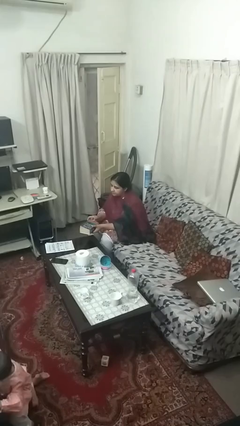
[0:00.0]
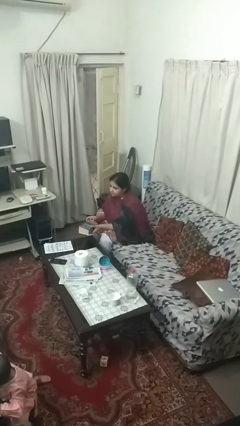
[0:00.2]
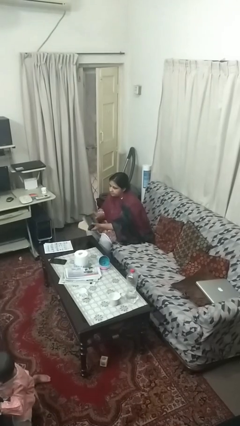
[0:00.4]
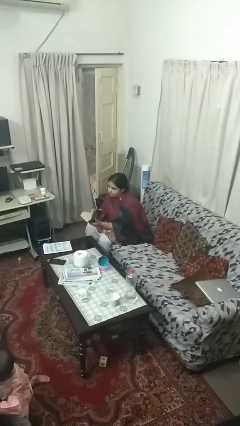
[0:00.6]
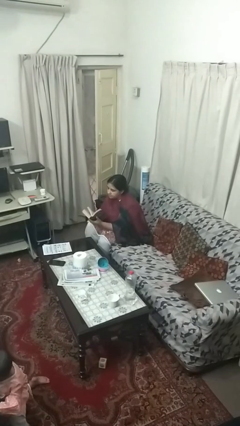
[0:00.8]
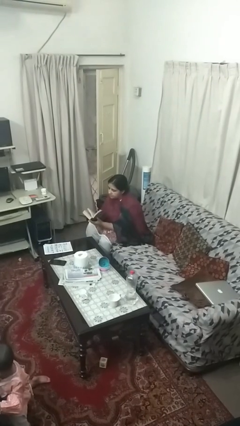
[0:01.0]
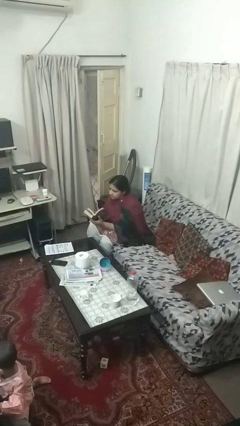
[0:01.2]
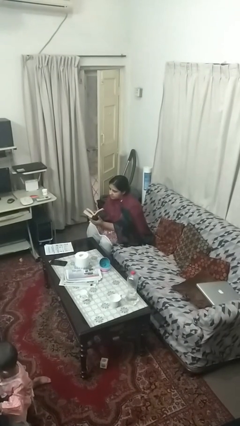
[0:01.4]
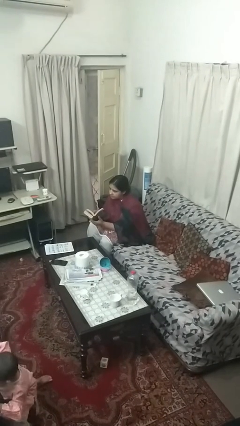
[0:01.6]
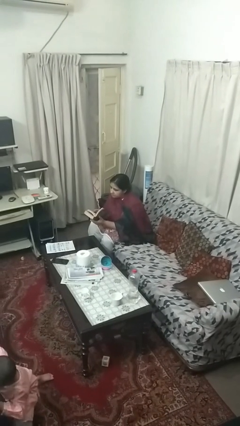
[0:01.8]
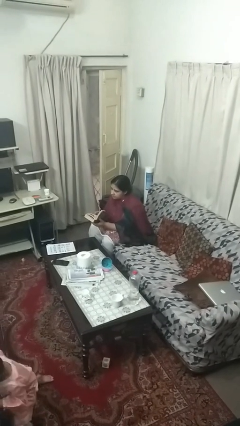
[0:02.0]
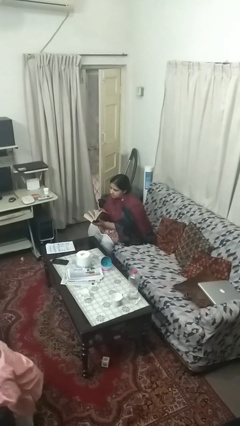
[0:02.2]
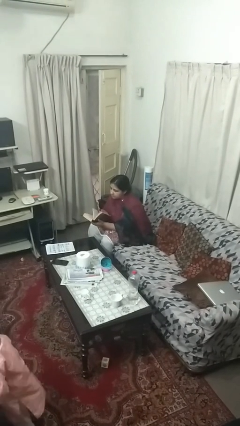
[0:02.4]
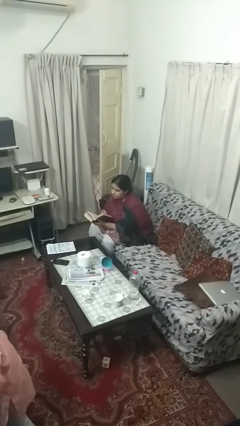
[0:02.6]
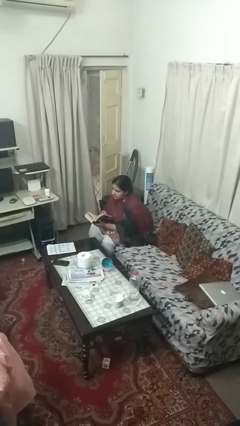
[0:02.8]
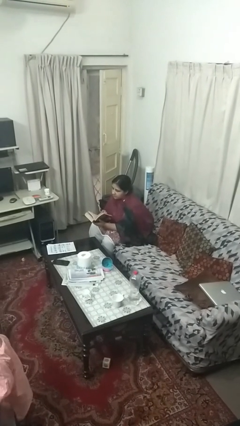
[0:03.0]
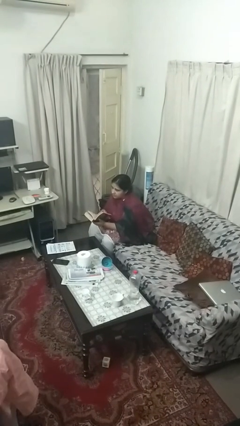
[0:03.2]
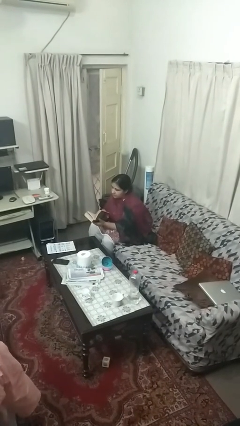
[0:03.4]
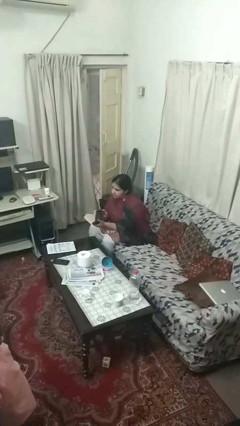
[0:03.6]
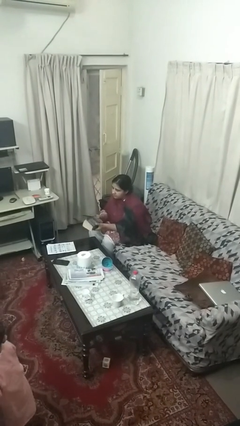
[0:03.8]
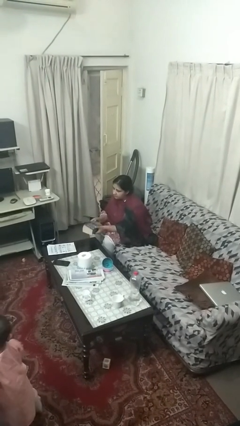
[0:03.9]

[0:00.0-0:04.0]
person reads book

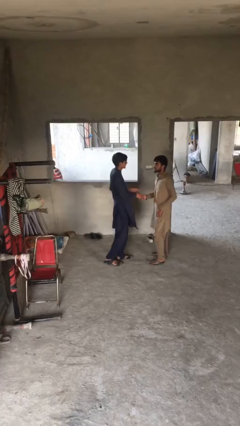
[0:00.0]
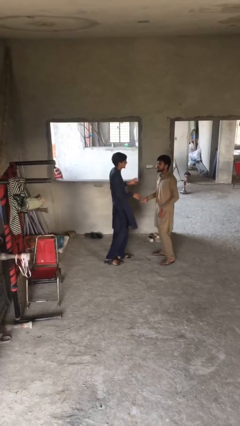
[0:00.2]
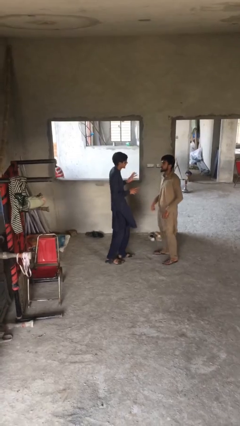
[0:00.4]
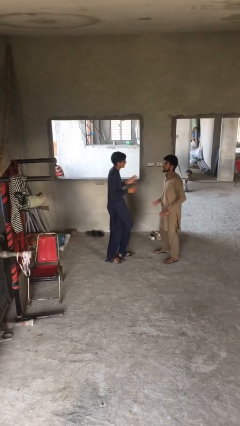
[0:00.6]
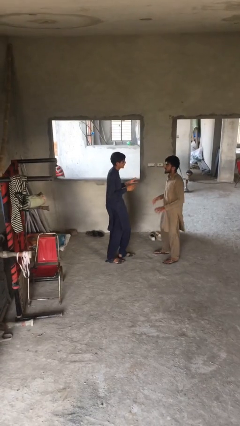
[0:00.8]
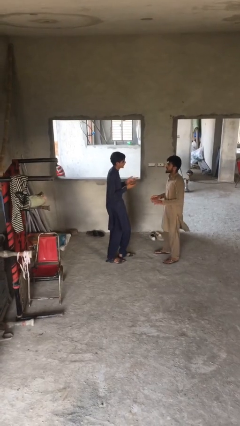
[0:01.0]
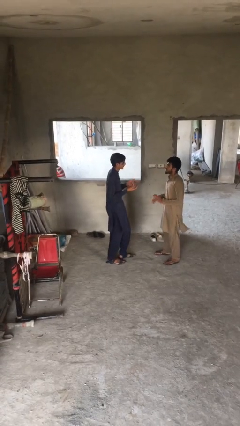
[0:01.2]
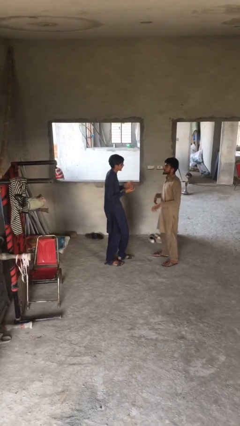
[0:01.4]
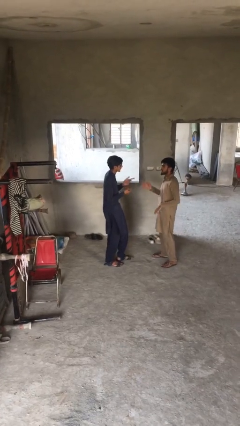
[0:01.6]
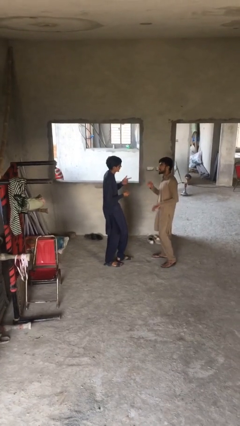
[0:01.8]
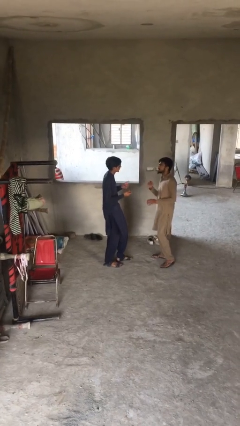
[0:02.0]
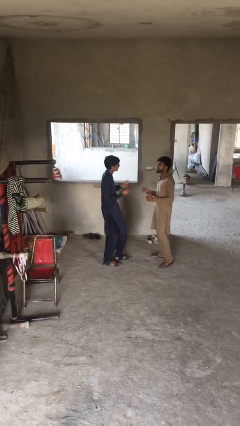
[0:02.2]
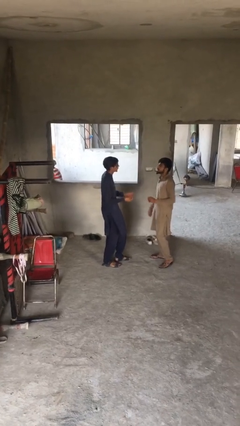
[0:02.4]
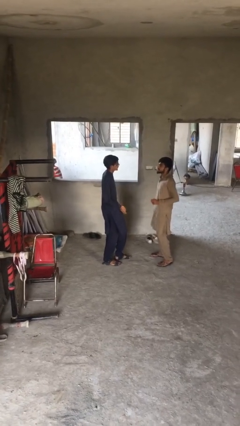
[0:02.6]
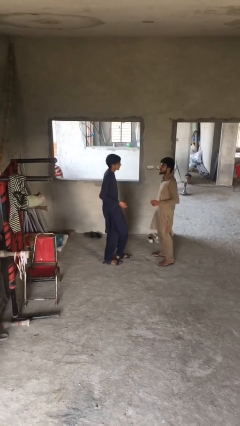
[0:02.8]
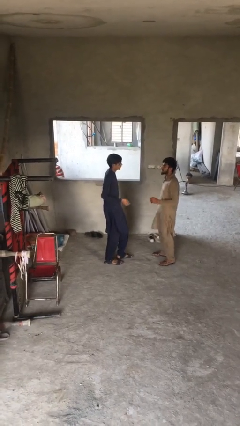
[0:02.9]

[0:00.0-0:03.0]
person talks to person

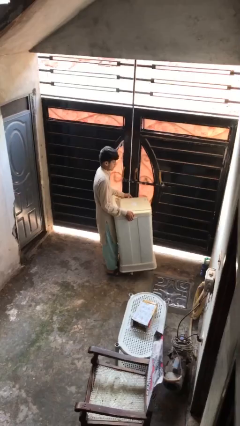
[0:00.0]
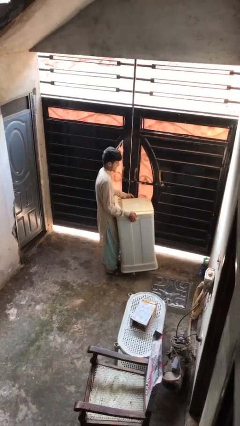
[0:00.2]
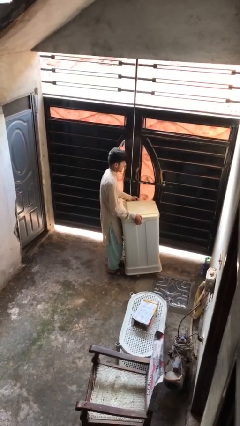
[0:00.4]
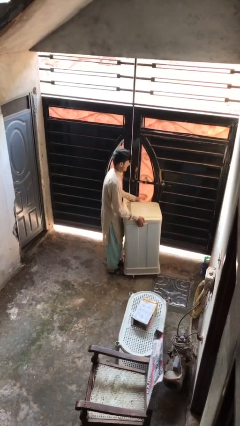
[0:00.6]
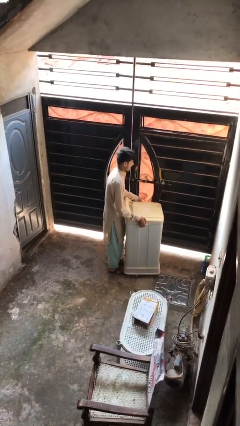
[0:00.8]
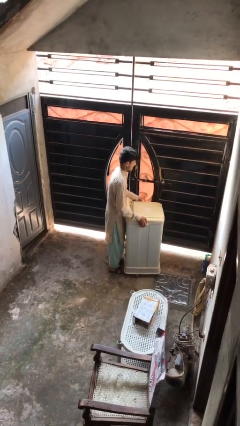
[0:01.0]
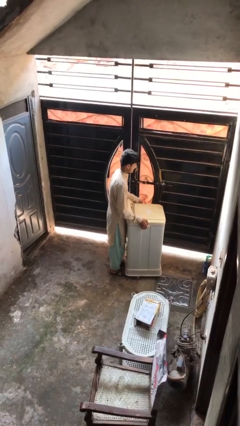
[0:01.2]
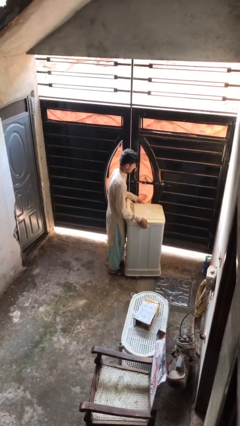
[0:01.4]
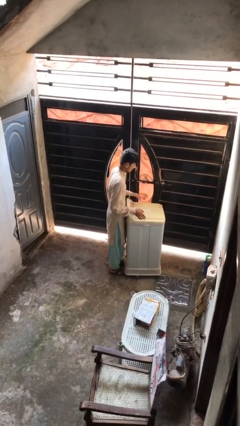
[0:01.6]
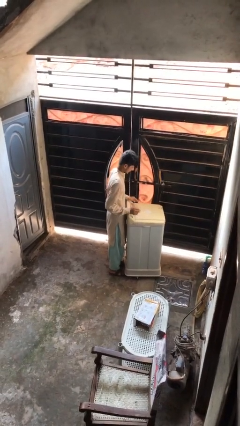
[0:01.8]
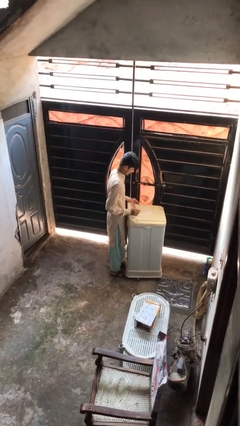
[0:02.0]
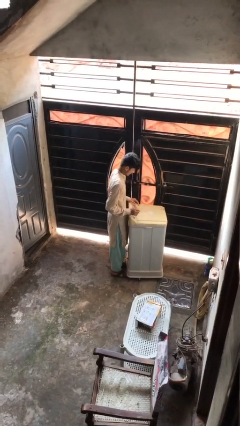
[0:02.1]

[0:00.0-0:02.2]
person puts down object on floor

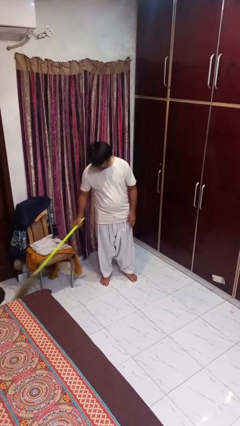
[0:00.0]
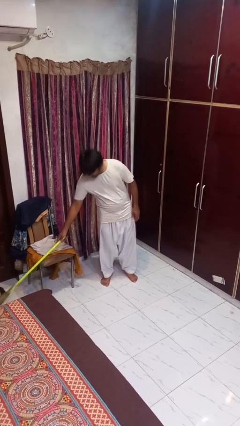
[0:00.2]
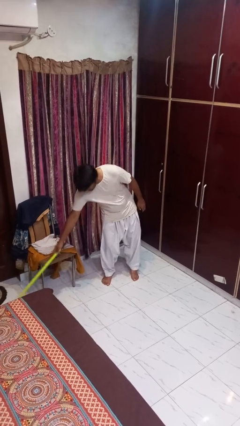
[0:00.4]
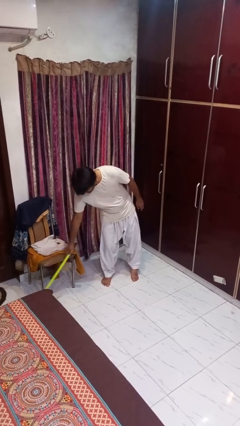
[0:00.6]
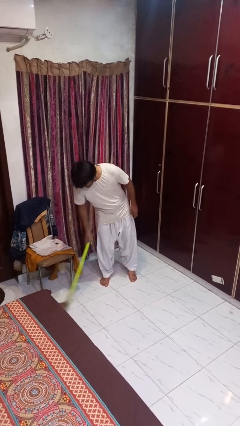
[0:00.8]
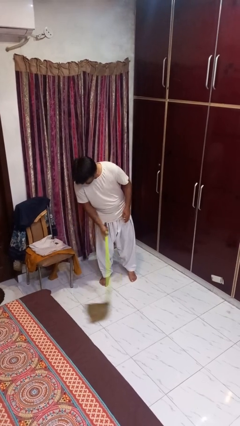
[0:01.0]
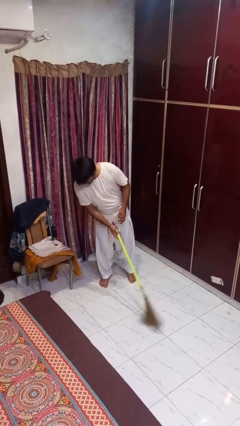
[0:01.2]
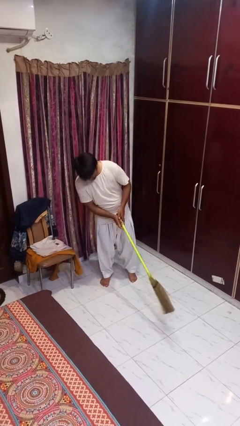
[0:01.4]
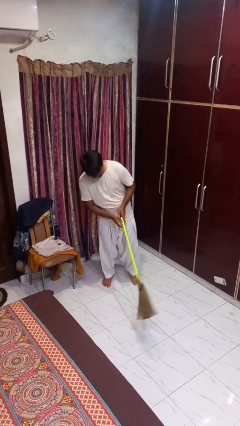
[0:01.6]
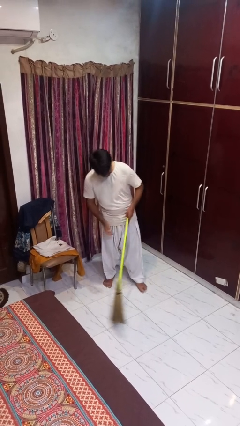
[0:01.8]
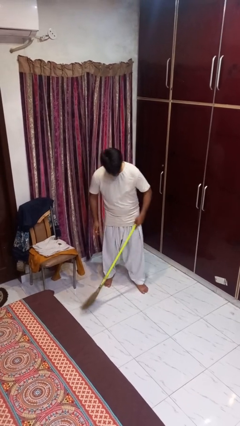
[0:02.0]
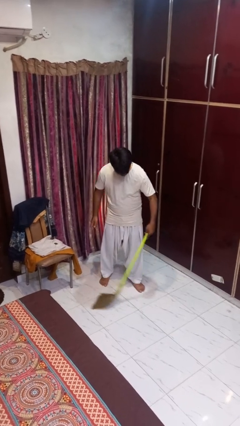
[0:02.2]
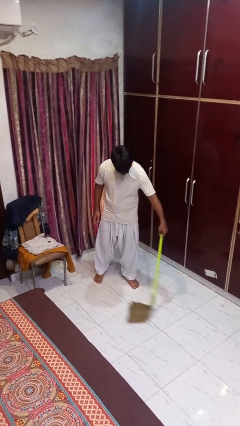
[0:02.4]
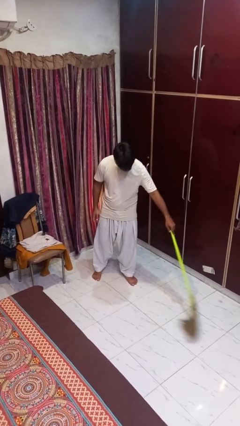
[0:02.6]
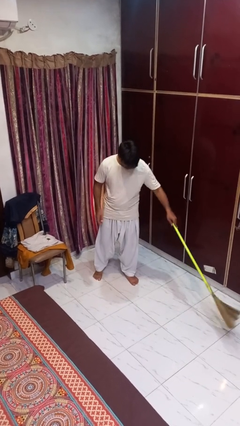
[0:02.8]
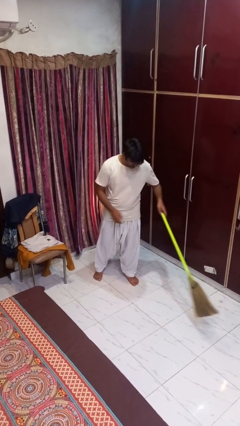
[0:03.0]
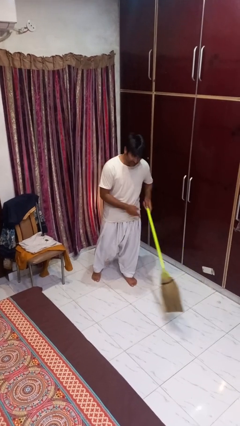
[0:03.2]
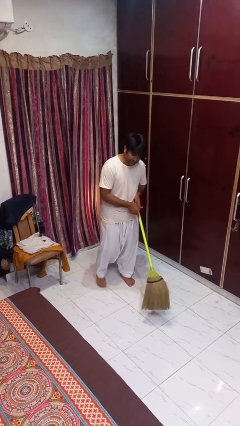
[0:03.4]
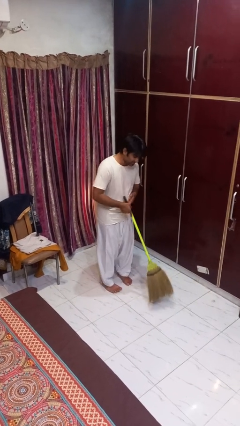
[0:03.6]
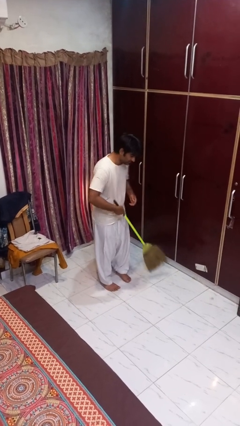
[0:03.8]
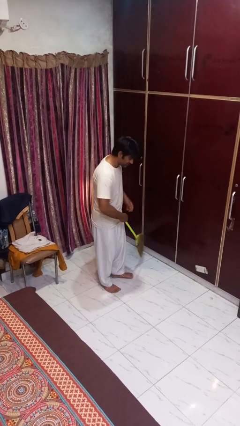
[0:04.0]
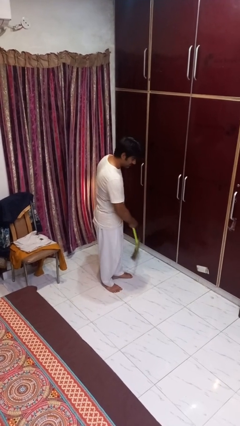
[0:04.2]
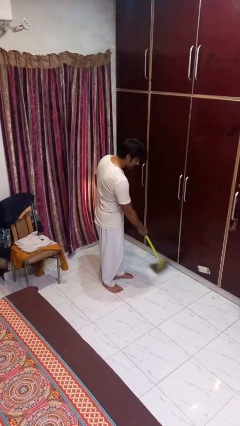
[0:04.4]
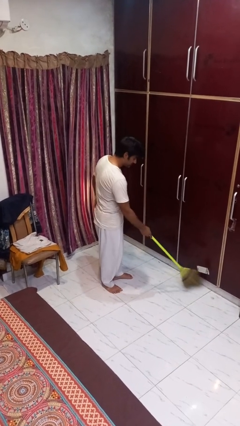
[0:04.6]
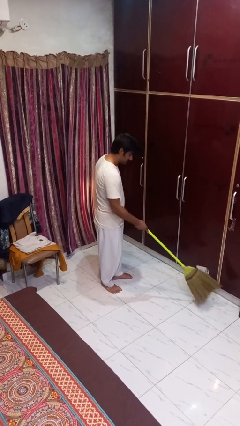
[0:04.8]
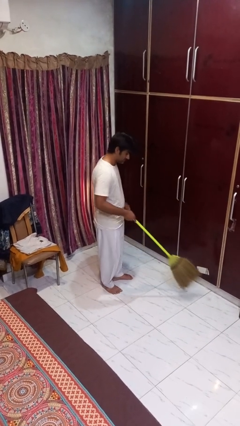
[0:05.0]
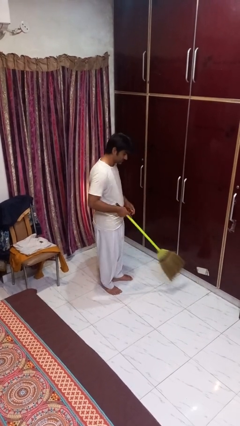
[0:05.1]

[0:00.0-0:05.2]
person sweeps floor

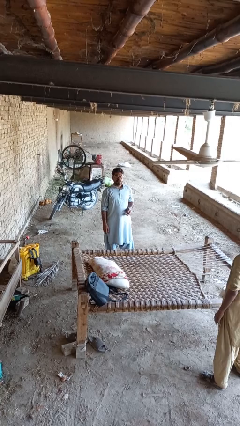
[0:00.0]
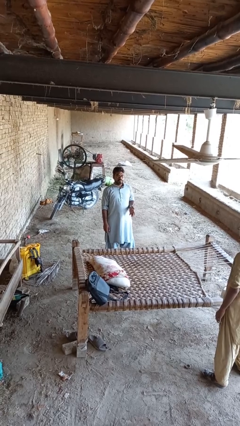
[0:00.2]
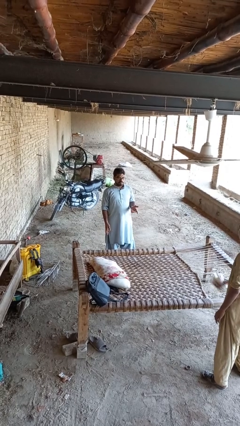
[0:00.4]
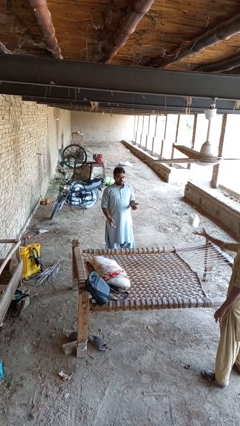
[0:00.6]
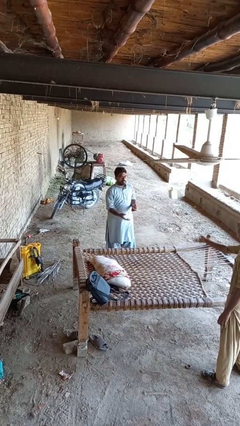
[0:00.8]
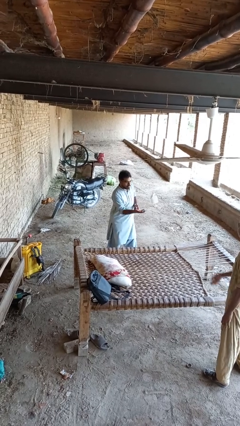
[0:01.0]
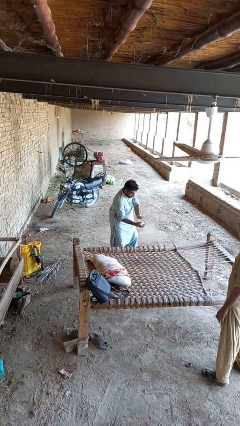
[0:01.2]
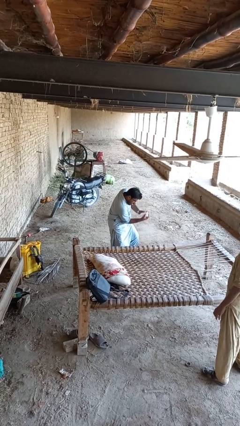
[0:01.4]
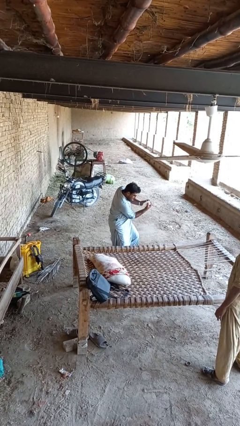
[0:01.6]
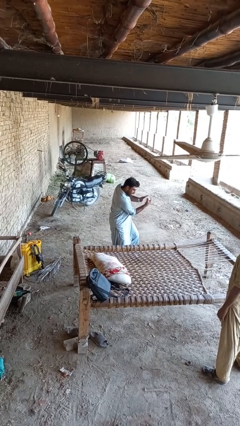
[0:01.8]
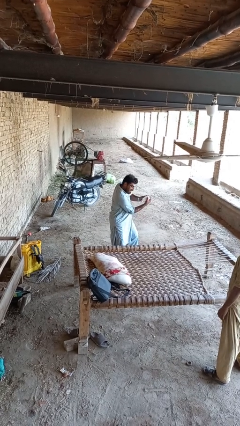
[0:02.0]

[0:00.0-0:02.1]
person catches object from person

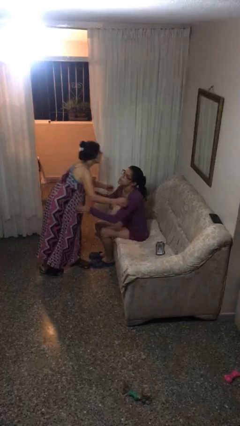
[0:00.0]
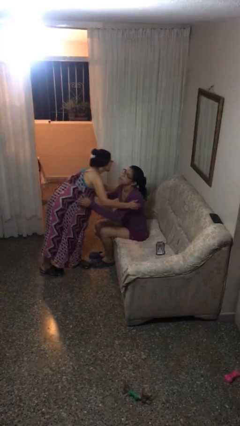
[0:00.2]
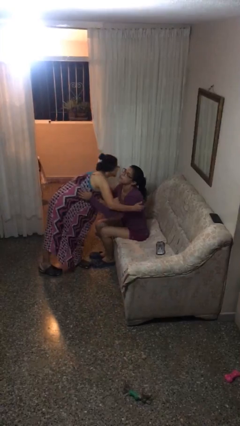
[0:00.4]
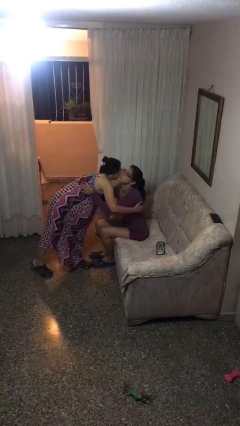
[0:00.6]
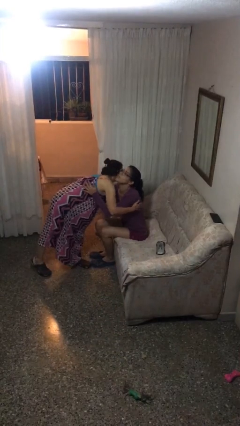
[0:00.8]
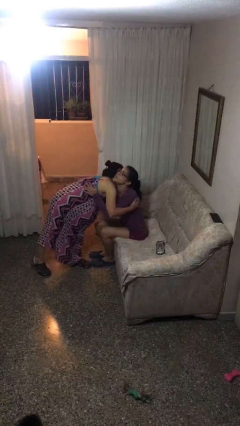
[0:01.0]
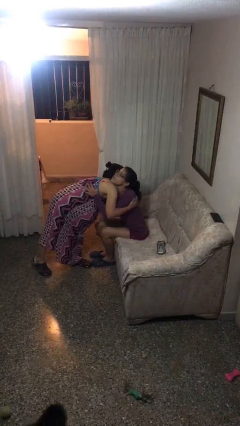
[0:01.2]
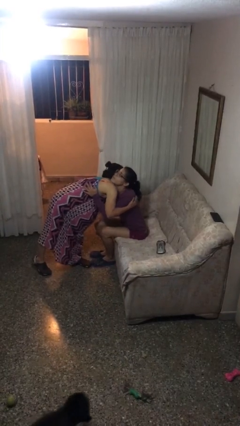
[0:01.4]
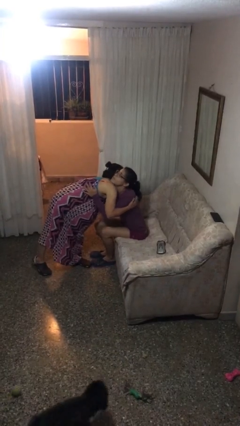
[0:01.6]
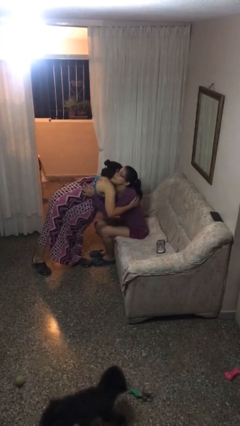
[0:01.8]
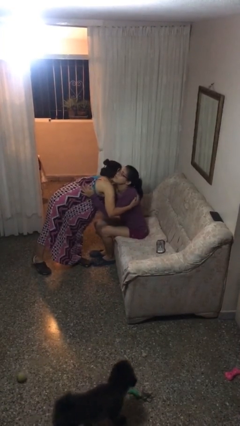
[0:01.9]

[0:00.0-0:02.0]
person embraces person
